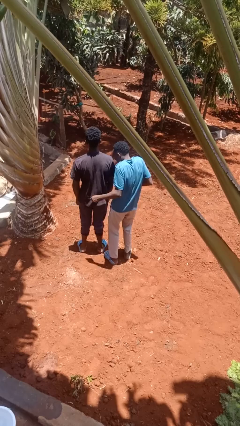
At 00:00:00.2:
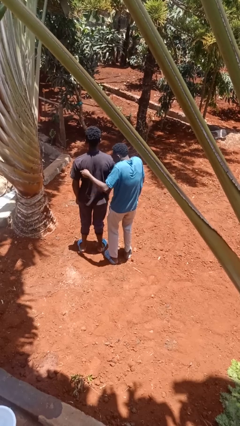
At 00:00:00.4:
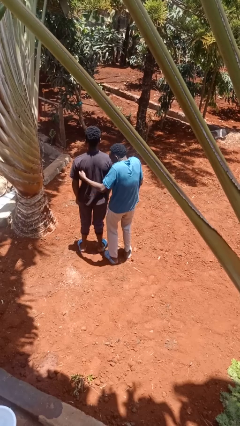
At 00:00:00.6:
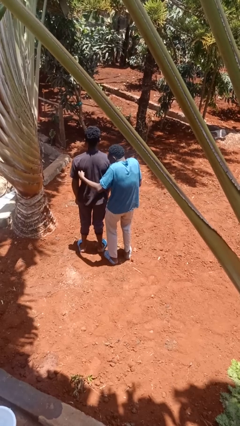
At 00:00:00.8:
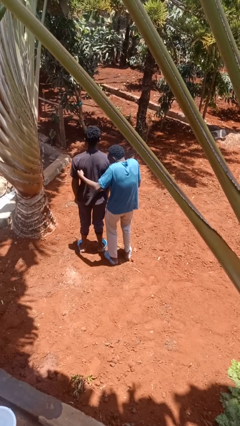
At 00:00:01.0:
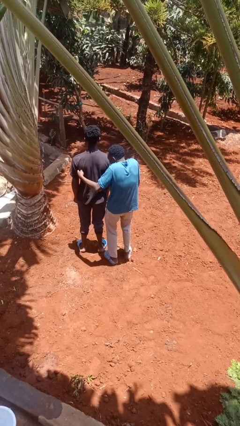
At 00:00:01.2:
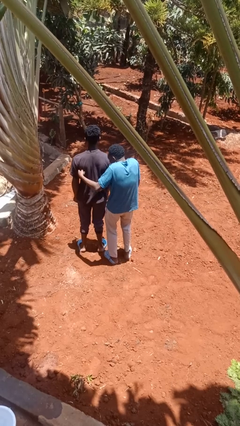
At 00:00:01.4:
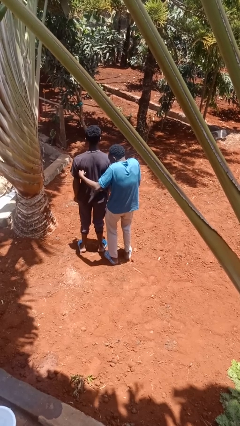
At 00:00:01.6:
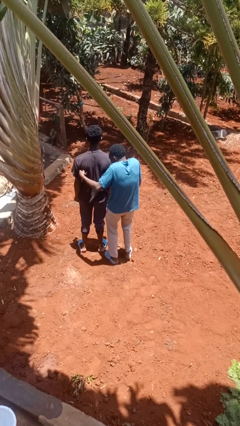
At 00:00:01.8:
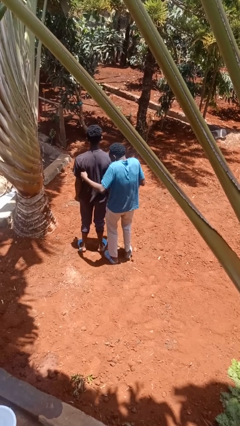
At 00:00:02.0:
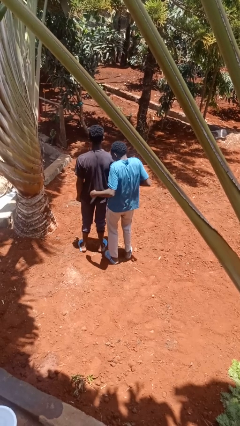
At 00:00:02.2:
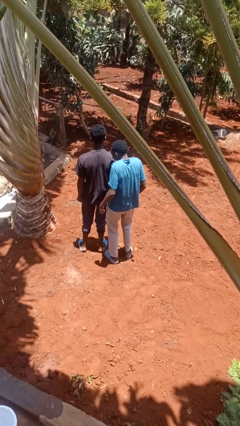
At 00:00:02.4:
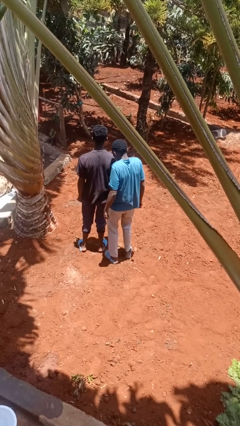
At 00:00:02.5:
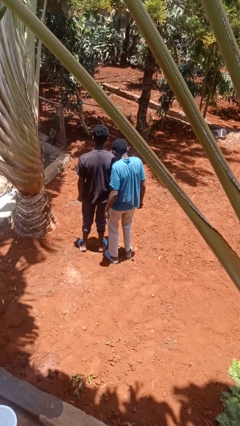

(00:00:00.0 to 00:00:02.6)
person tickles person

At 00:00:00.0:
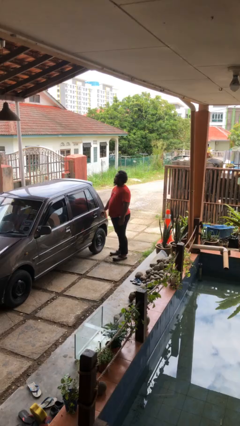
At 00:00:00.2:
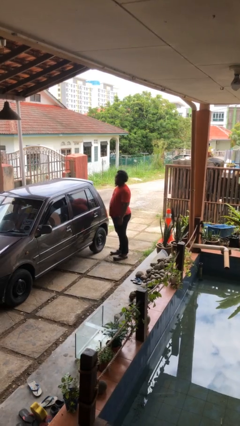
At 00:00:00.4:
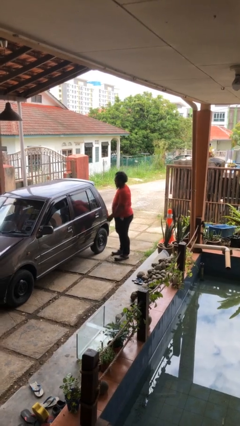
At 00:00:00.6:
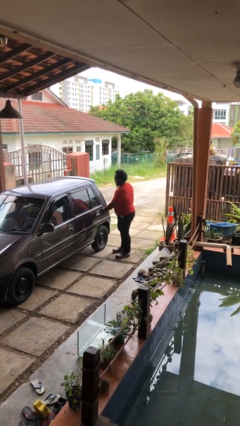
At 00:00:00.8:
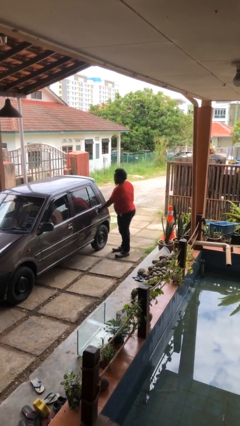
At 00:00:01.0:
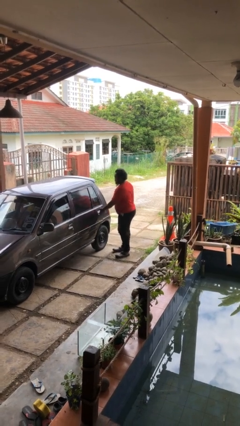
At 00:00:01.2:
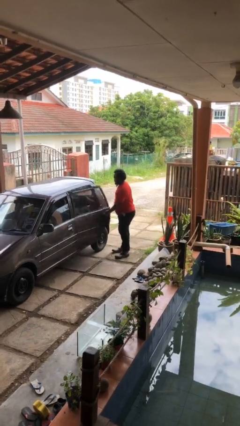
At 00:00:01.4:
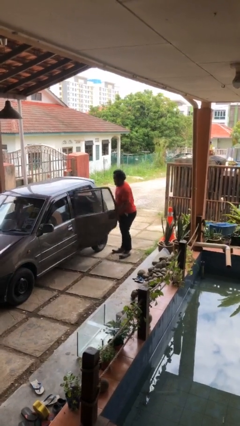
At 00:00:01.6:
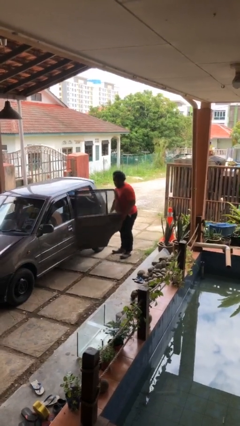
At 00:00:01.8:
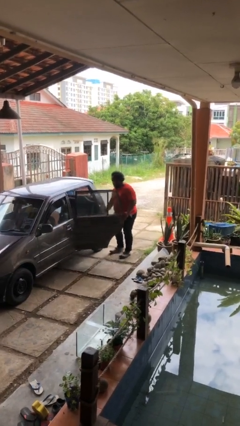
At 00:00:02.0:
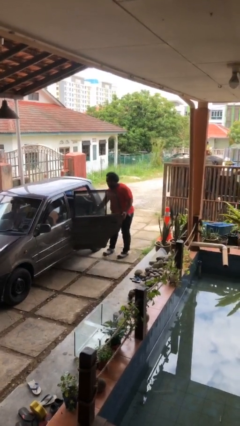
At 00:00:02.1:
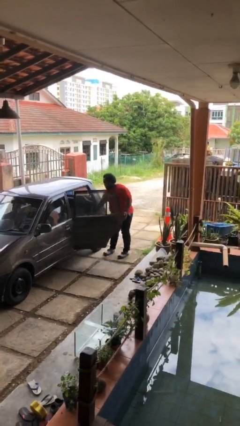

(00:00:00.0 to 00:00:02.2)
person opens car door

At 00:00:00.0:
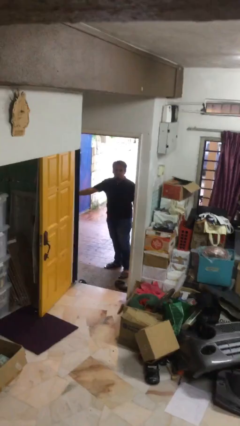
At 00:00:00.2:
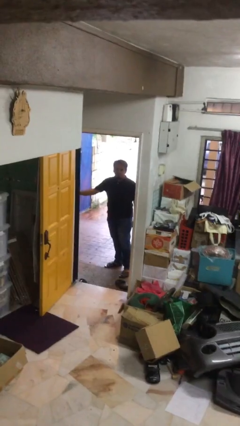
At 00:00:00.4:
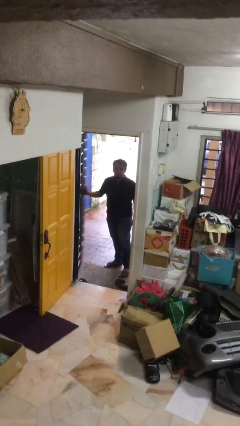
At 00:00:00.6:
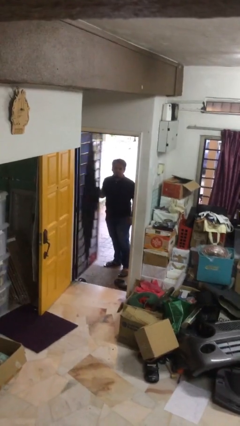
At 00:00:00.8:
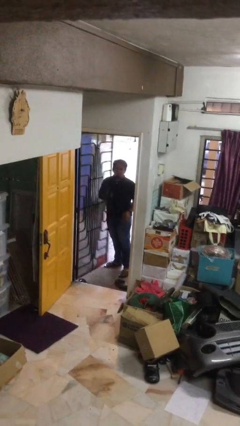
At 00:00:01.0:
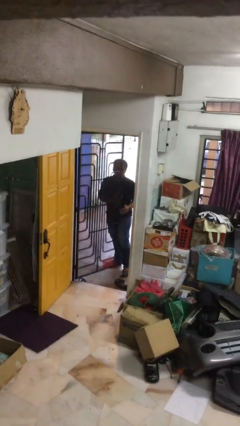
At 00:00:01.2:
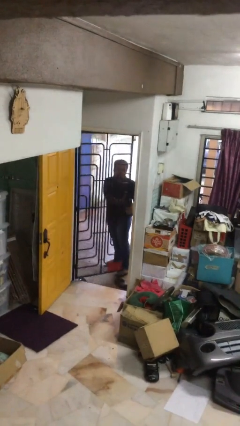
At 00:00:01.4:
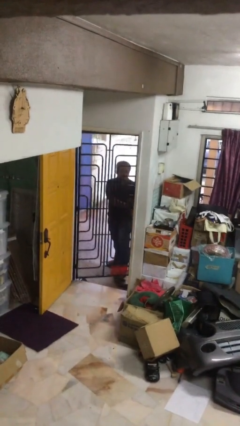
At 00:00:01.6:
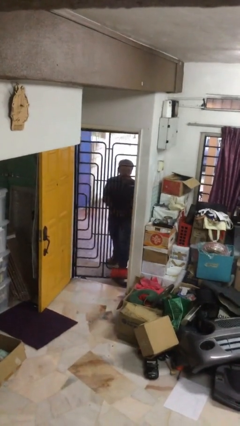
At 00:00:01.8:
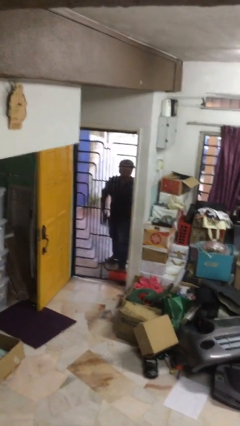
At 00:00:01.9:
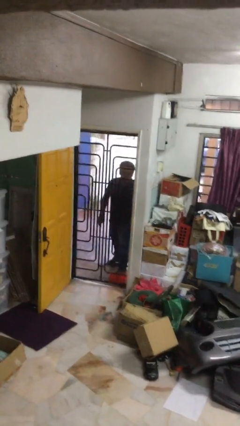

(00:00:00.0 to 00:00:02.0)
person closes facility door

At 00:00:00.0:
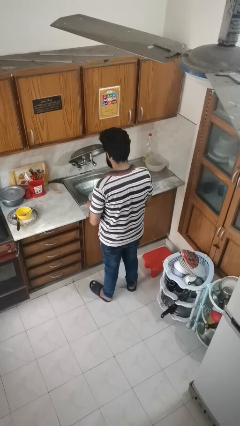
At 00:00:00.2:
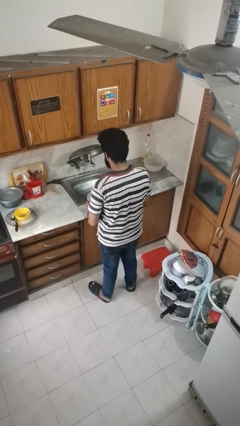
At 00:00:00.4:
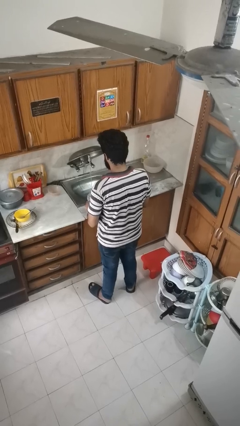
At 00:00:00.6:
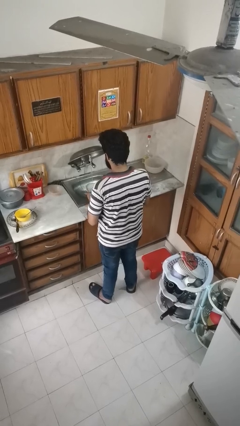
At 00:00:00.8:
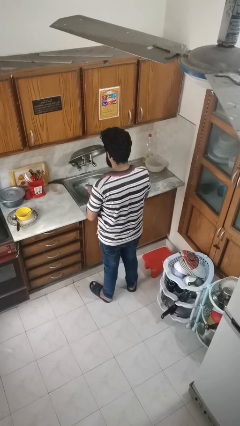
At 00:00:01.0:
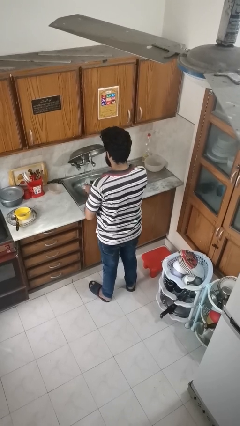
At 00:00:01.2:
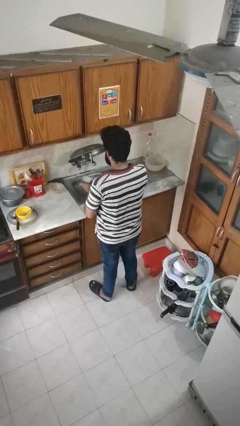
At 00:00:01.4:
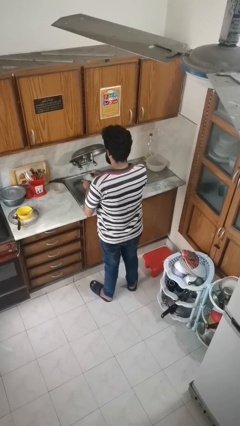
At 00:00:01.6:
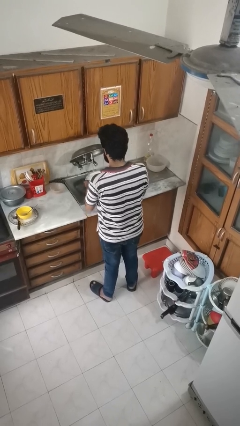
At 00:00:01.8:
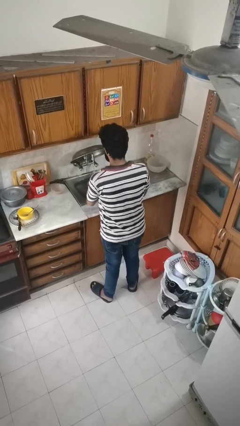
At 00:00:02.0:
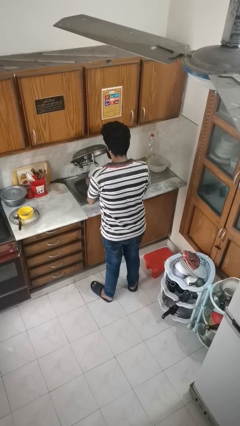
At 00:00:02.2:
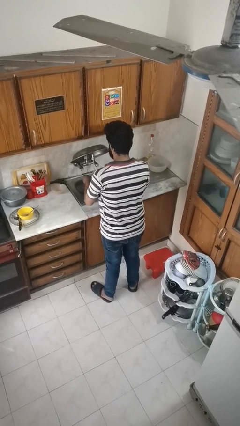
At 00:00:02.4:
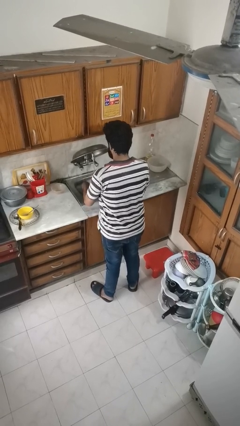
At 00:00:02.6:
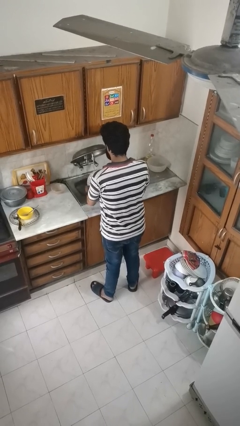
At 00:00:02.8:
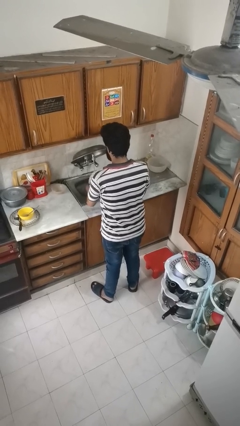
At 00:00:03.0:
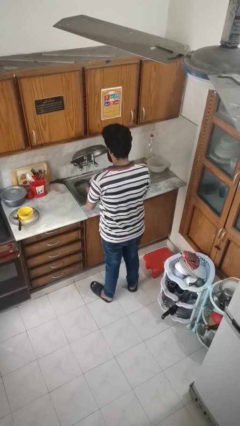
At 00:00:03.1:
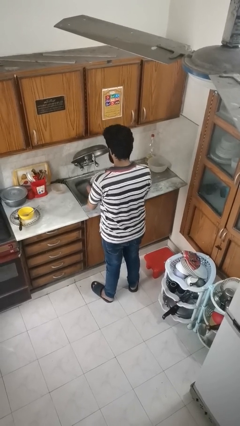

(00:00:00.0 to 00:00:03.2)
person washes dish

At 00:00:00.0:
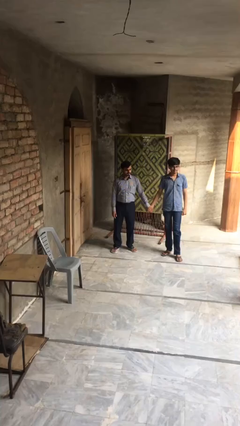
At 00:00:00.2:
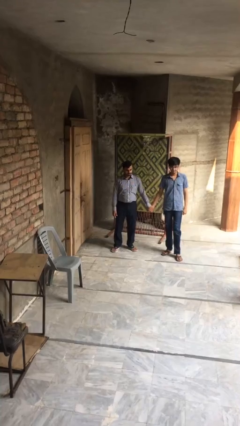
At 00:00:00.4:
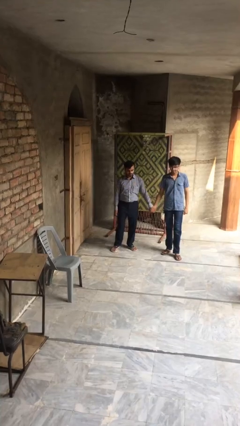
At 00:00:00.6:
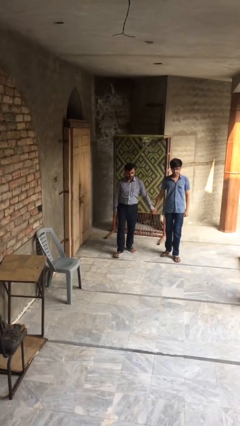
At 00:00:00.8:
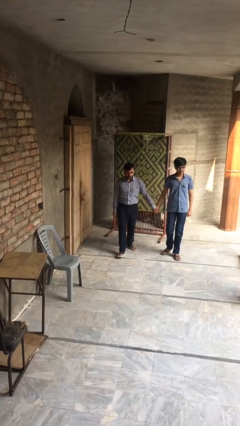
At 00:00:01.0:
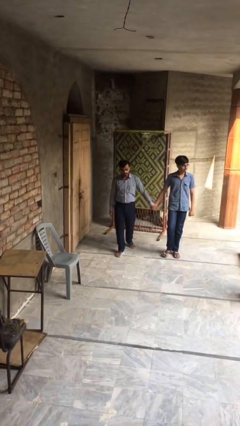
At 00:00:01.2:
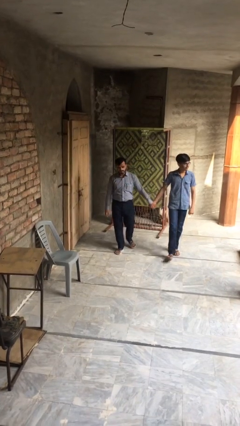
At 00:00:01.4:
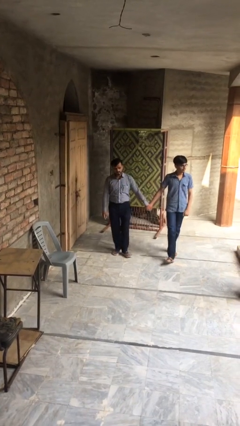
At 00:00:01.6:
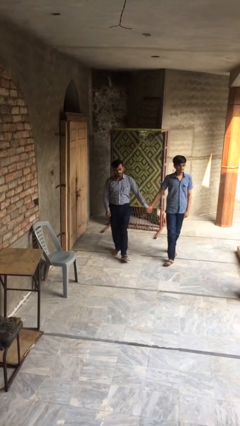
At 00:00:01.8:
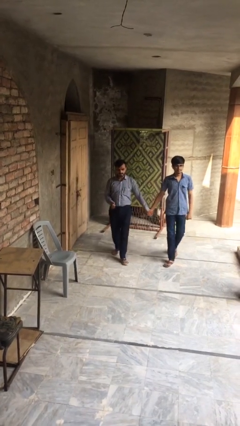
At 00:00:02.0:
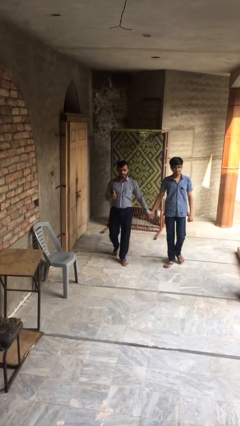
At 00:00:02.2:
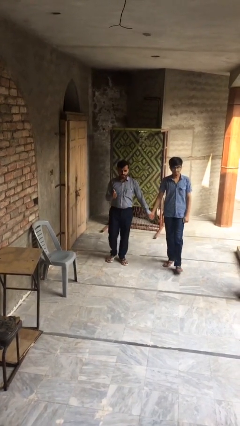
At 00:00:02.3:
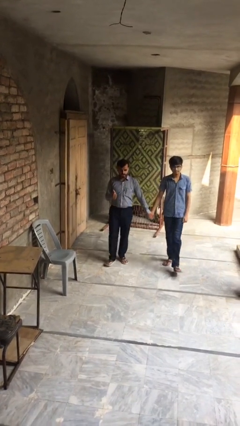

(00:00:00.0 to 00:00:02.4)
person holds hand

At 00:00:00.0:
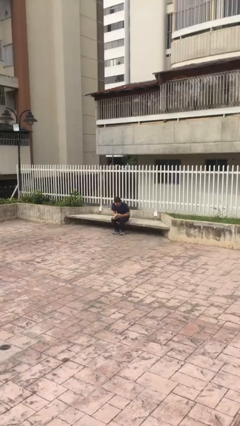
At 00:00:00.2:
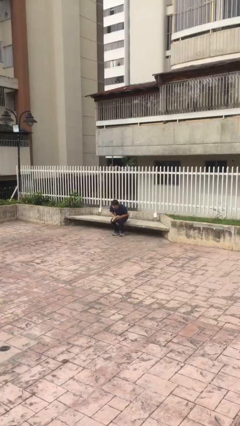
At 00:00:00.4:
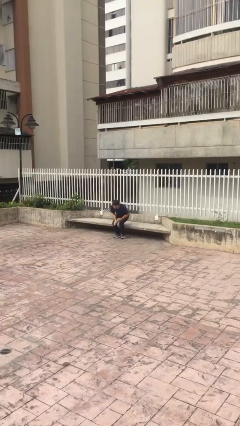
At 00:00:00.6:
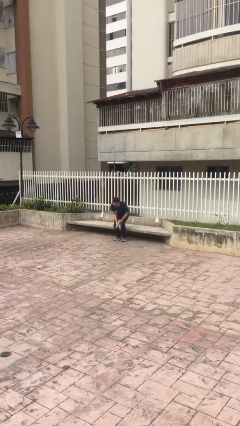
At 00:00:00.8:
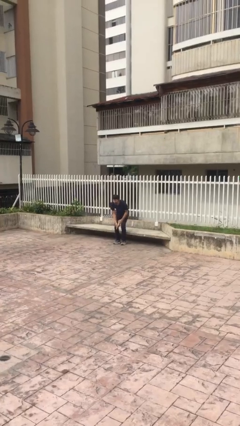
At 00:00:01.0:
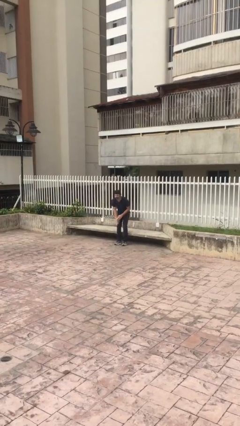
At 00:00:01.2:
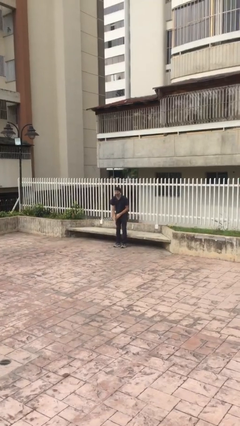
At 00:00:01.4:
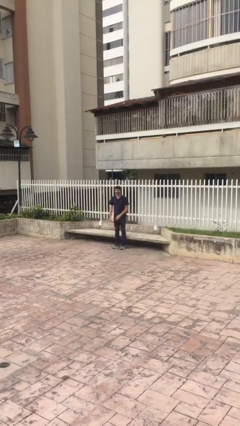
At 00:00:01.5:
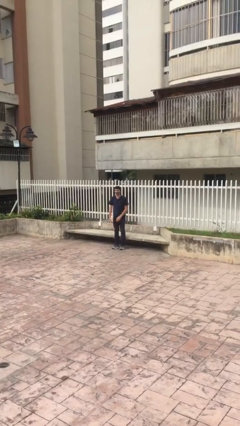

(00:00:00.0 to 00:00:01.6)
person stands up

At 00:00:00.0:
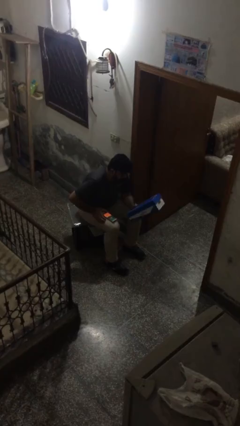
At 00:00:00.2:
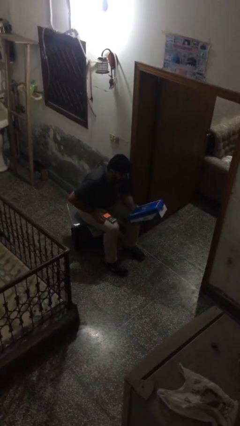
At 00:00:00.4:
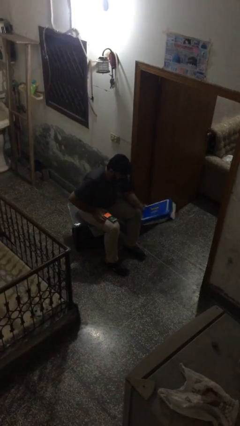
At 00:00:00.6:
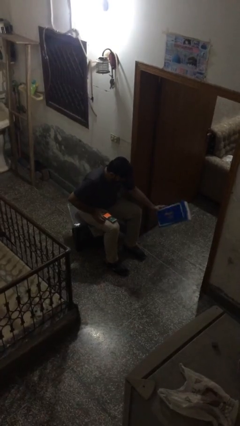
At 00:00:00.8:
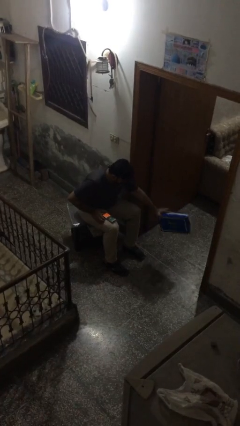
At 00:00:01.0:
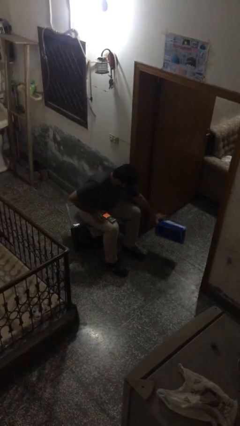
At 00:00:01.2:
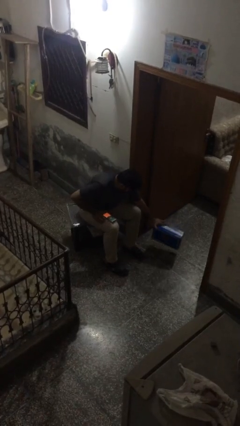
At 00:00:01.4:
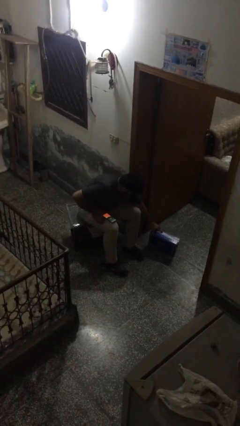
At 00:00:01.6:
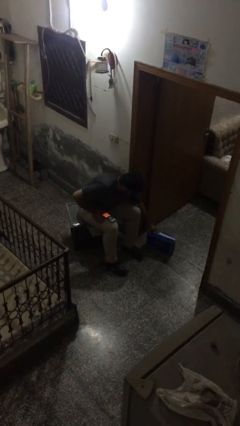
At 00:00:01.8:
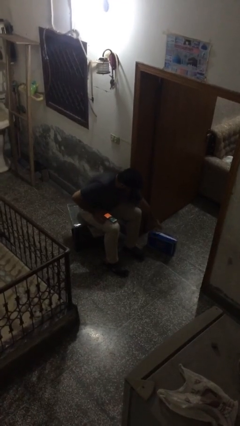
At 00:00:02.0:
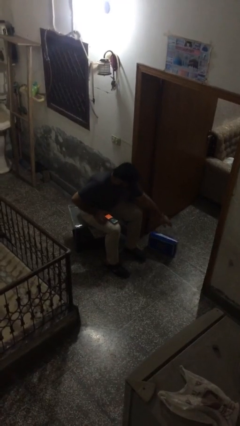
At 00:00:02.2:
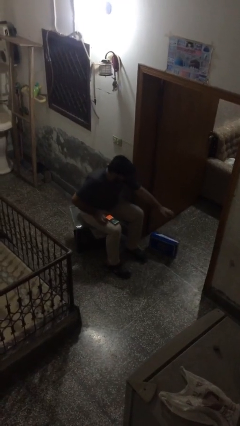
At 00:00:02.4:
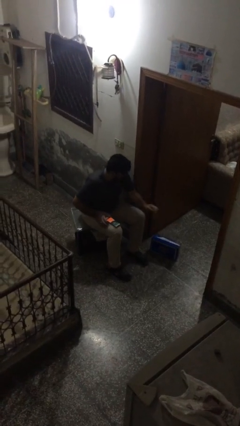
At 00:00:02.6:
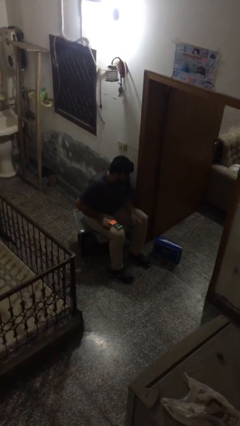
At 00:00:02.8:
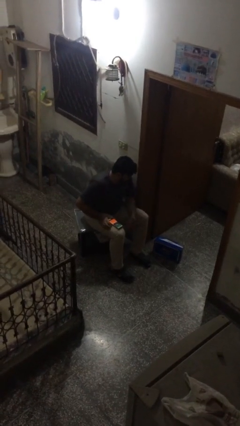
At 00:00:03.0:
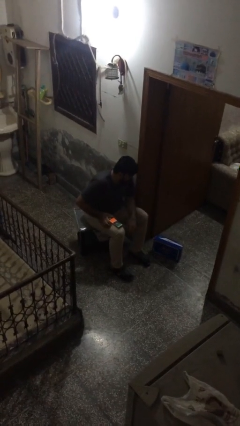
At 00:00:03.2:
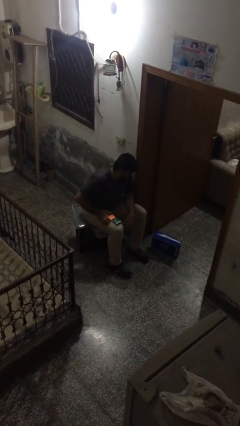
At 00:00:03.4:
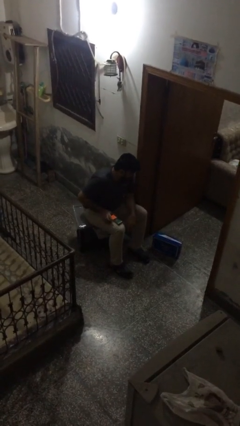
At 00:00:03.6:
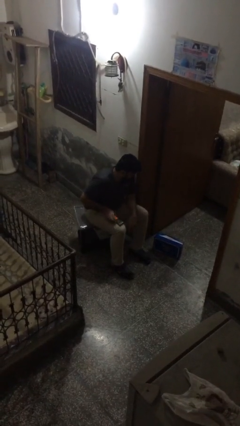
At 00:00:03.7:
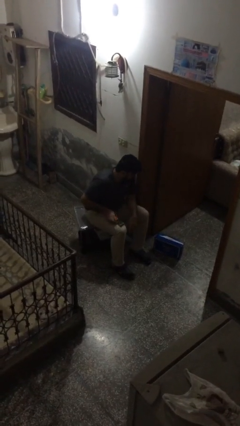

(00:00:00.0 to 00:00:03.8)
person puts down object on floor
